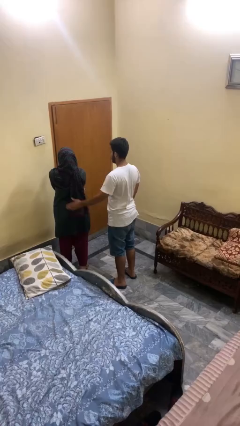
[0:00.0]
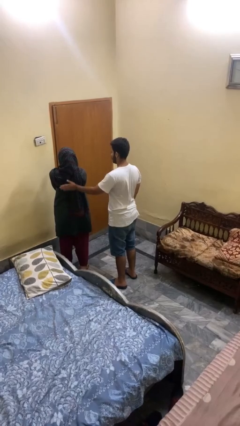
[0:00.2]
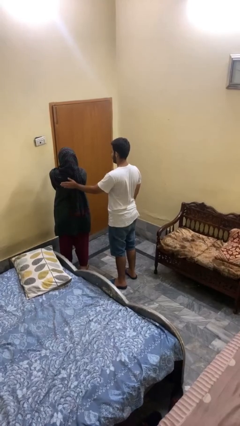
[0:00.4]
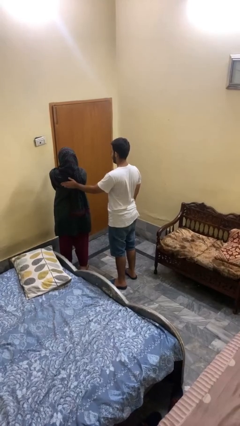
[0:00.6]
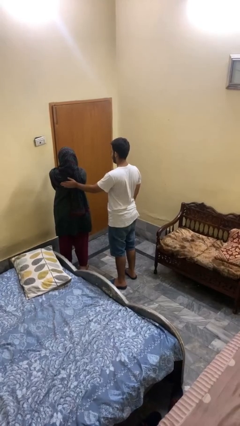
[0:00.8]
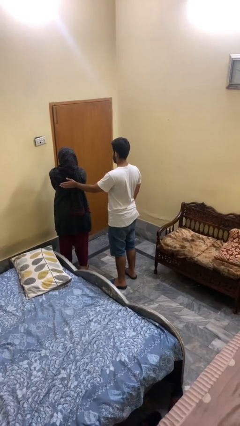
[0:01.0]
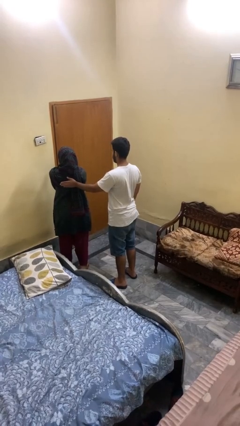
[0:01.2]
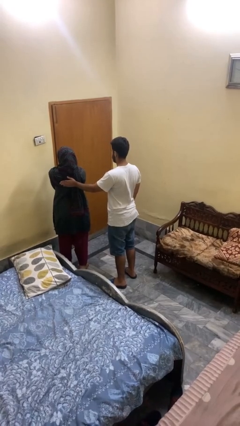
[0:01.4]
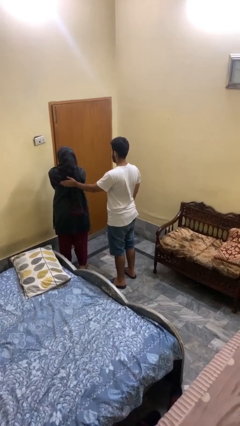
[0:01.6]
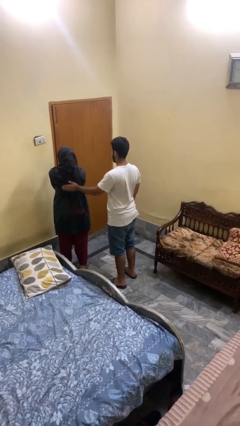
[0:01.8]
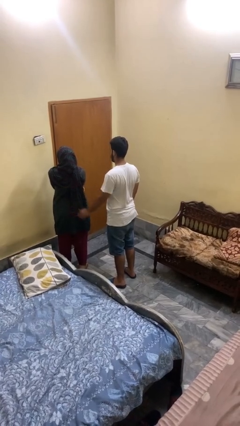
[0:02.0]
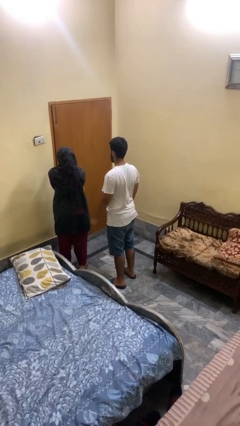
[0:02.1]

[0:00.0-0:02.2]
person touches back of person

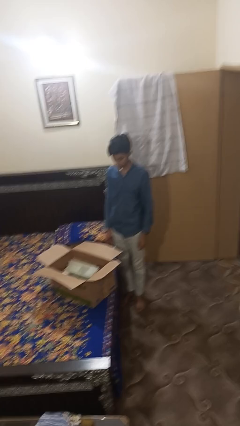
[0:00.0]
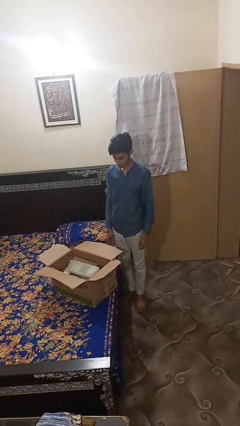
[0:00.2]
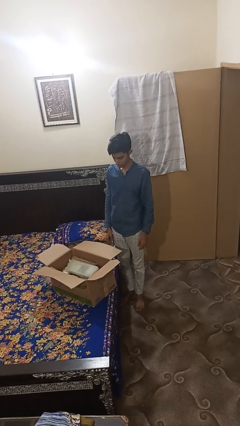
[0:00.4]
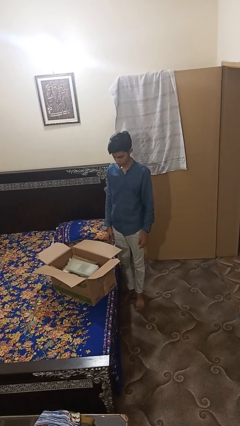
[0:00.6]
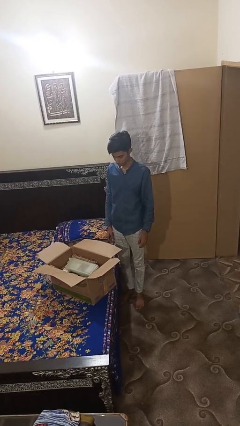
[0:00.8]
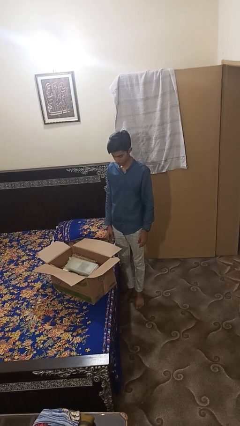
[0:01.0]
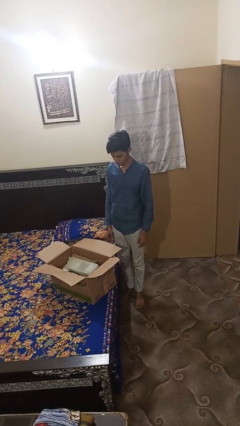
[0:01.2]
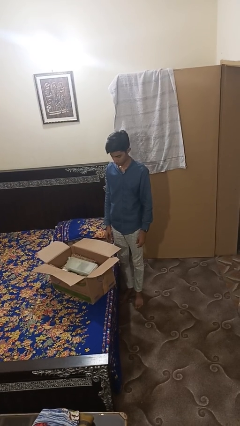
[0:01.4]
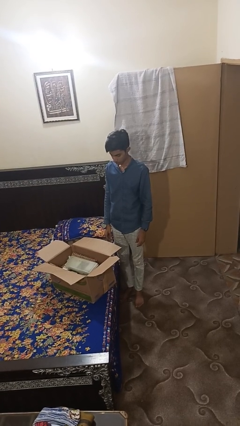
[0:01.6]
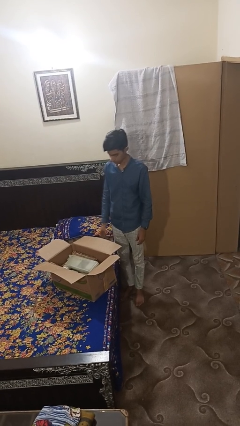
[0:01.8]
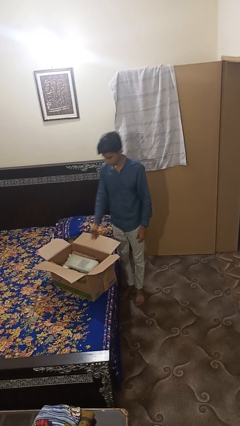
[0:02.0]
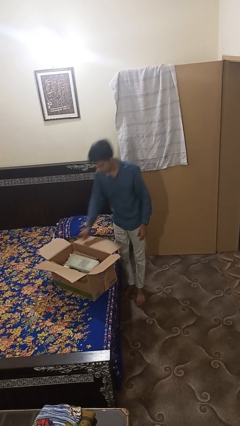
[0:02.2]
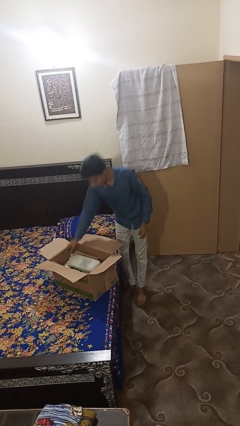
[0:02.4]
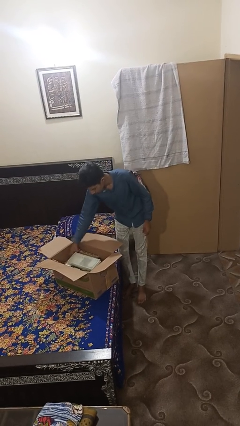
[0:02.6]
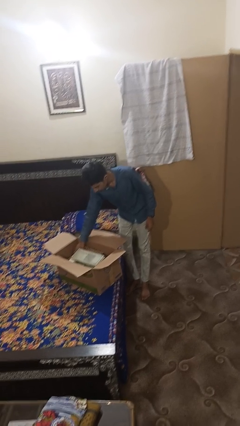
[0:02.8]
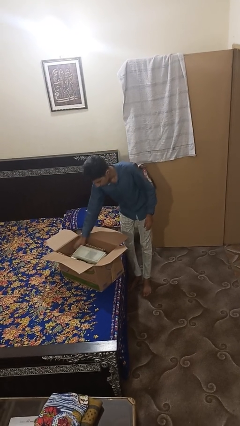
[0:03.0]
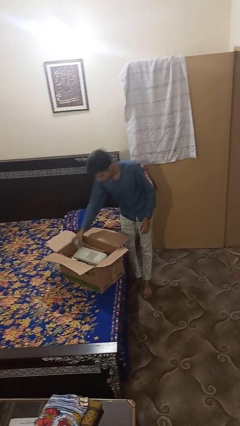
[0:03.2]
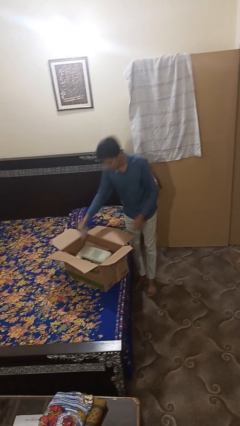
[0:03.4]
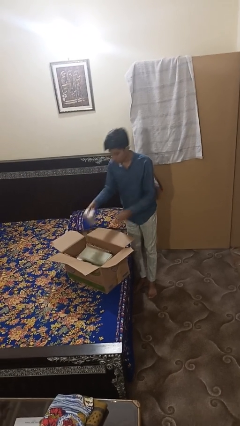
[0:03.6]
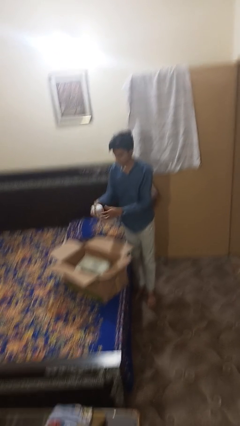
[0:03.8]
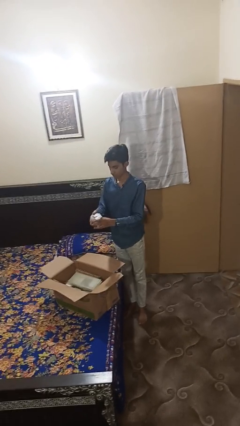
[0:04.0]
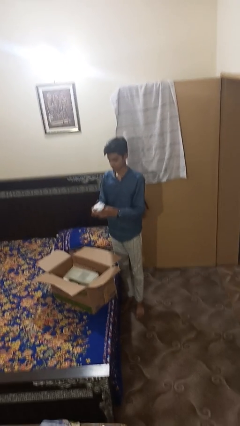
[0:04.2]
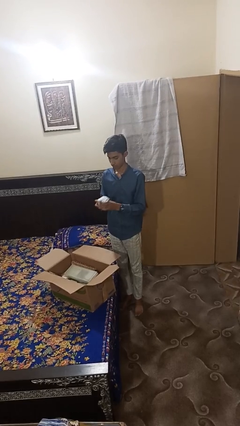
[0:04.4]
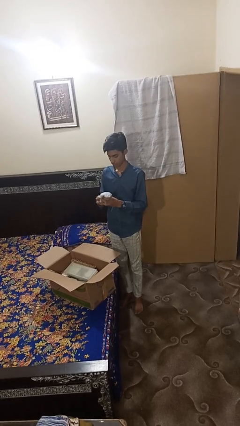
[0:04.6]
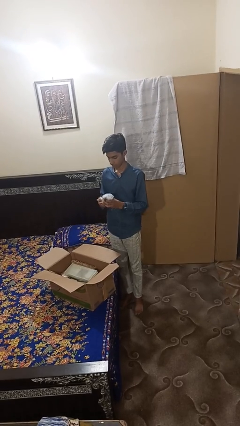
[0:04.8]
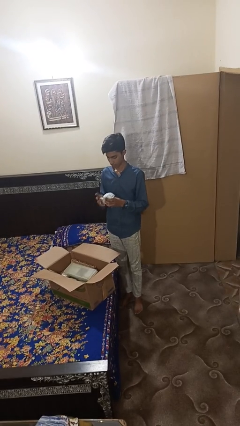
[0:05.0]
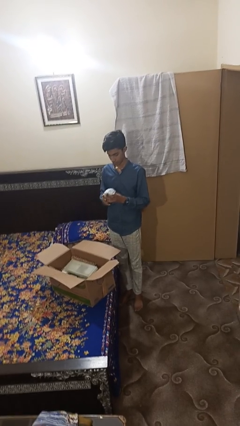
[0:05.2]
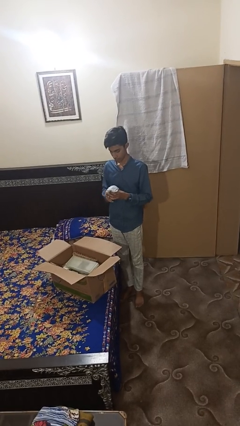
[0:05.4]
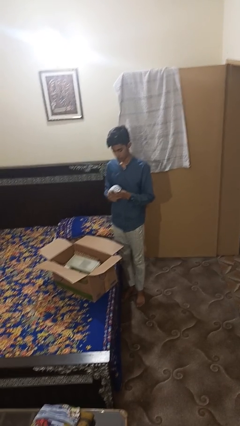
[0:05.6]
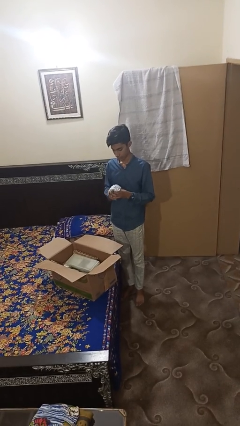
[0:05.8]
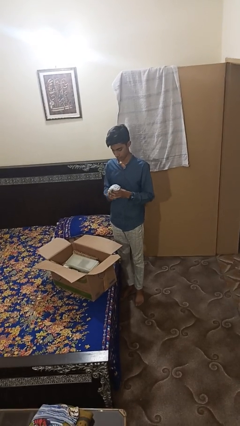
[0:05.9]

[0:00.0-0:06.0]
person takes object from box

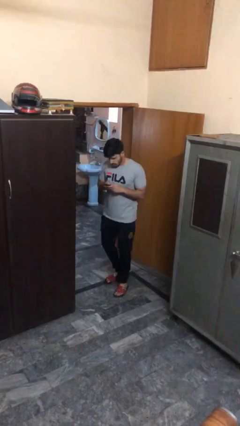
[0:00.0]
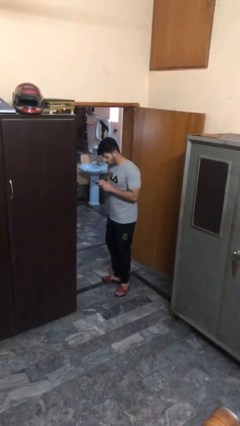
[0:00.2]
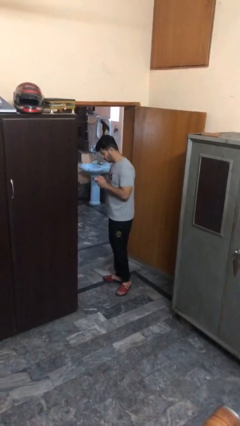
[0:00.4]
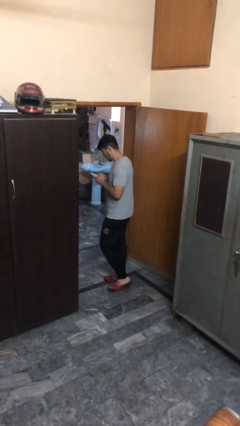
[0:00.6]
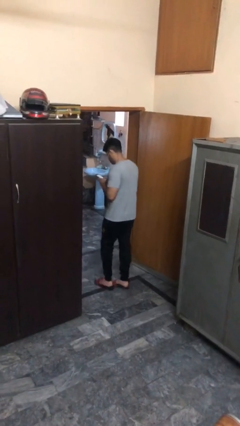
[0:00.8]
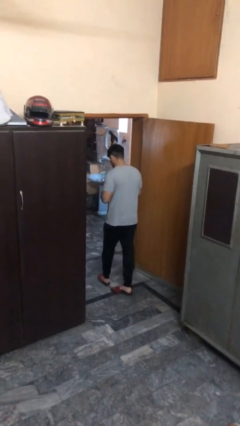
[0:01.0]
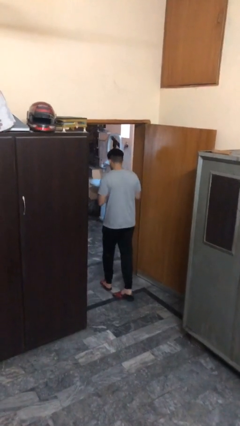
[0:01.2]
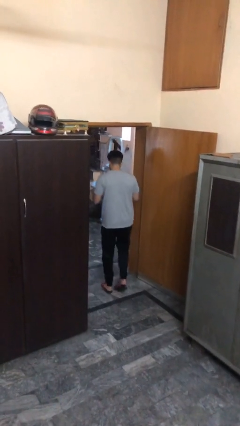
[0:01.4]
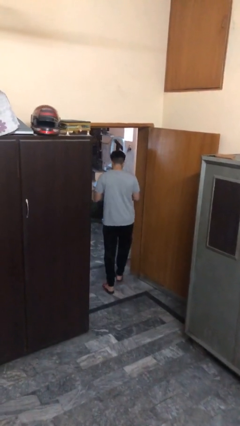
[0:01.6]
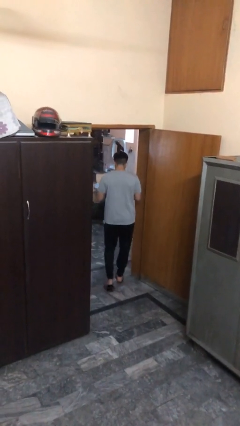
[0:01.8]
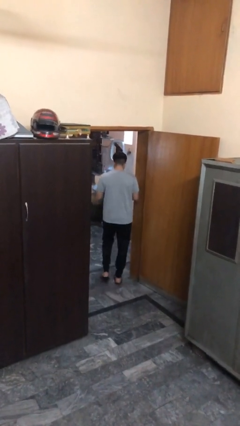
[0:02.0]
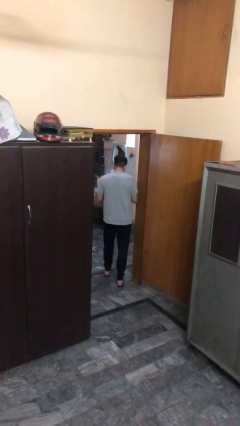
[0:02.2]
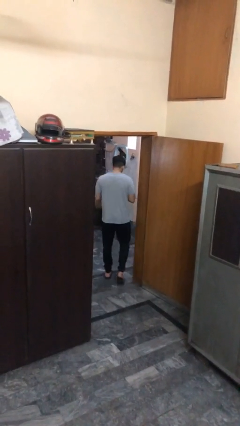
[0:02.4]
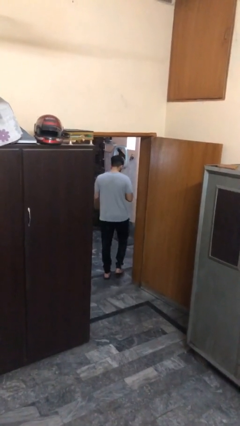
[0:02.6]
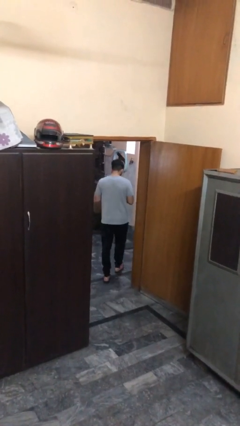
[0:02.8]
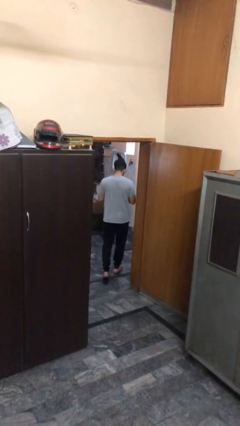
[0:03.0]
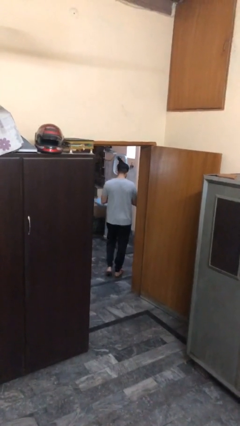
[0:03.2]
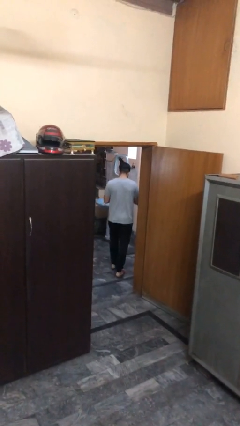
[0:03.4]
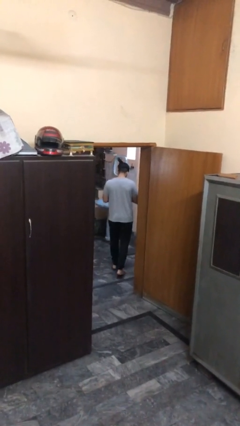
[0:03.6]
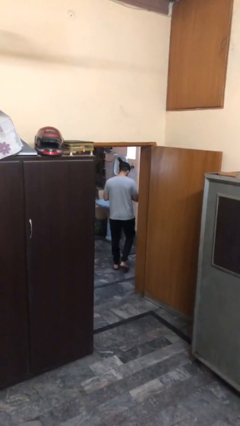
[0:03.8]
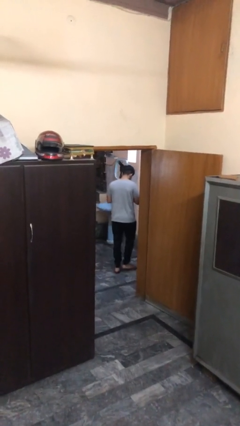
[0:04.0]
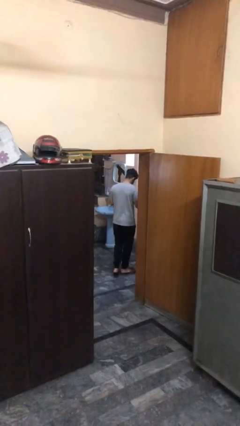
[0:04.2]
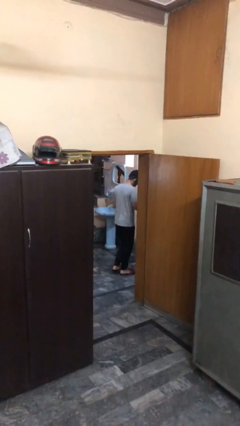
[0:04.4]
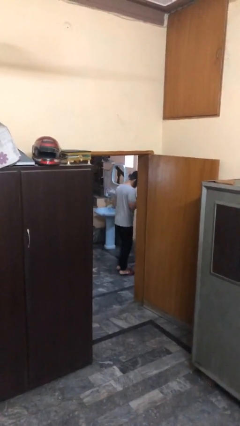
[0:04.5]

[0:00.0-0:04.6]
person exits scene through structure

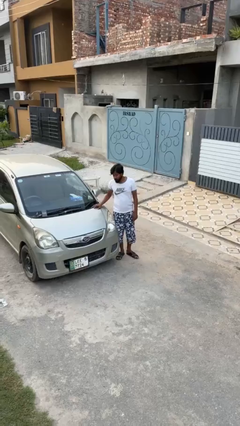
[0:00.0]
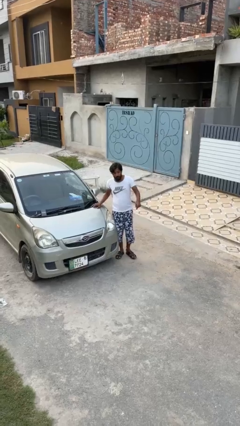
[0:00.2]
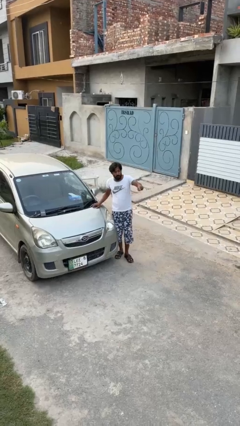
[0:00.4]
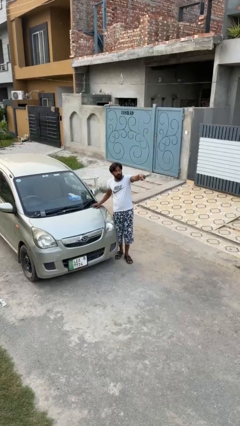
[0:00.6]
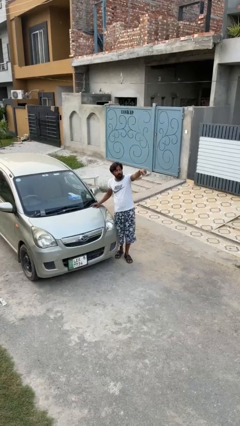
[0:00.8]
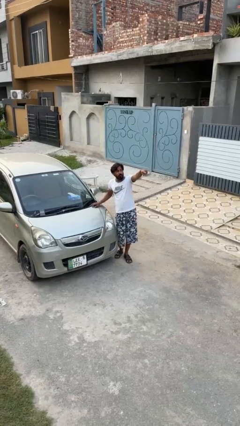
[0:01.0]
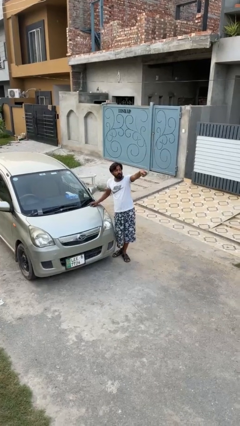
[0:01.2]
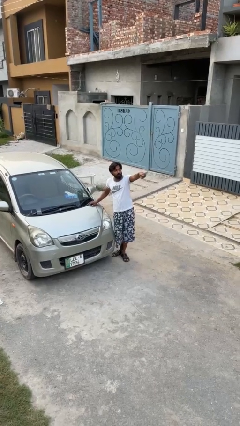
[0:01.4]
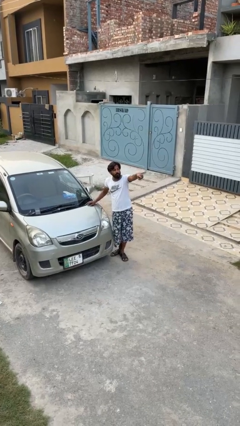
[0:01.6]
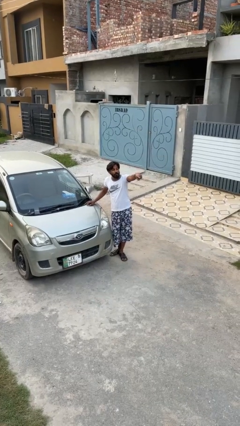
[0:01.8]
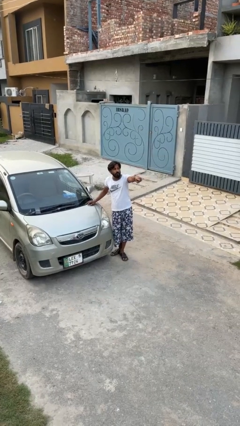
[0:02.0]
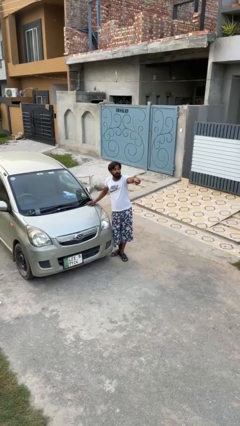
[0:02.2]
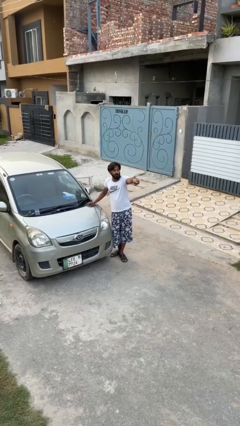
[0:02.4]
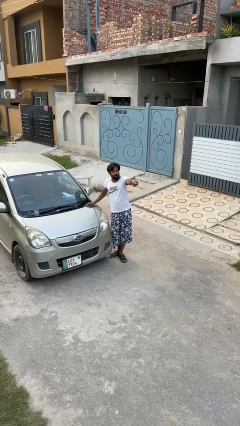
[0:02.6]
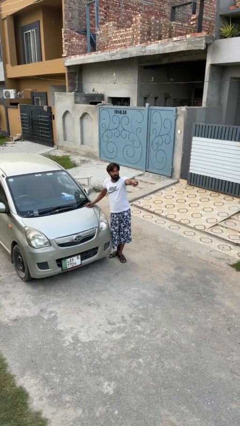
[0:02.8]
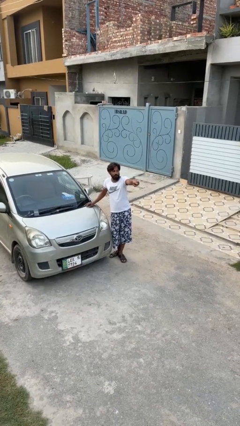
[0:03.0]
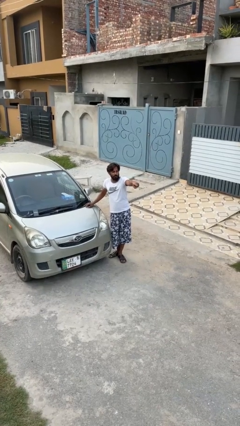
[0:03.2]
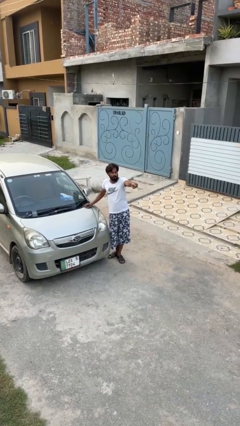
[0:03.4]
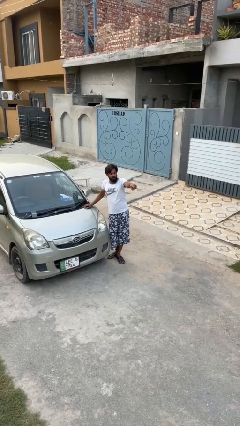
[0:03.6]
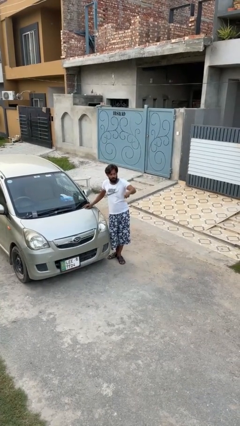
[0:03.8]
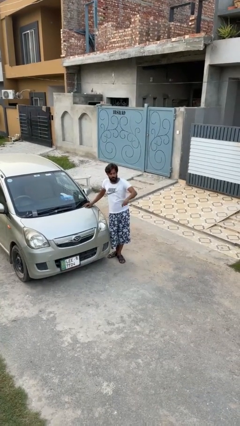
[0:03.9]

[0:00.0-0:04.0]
person points at person

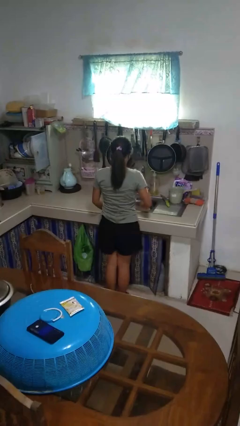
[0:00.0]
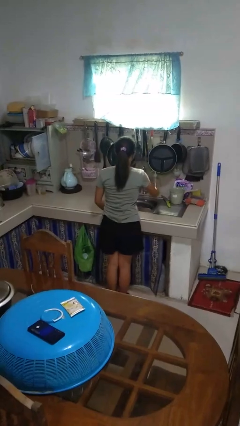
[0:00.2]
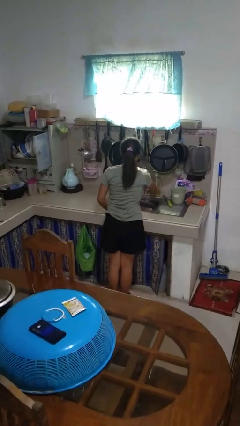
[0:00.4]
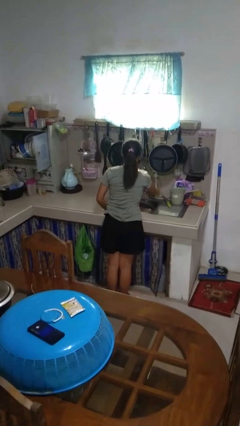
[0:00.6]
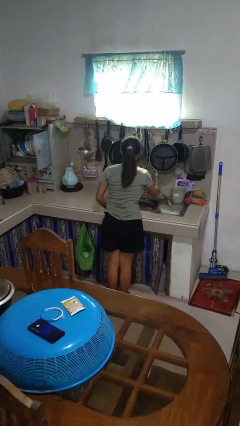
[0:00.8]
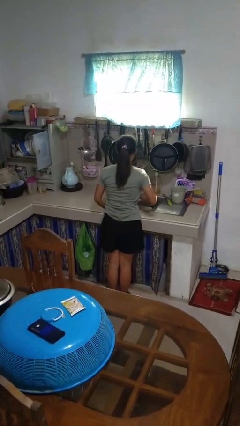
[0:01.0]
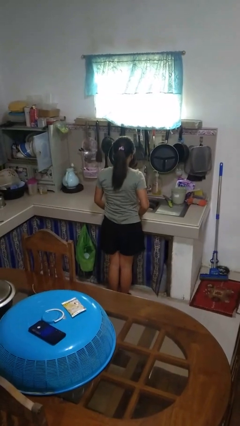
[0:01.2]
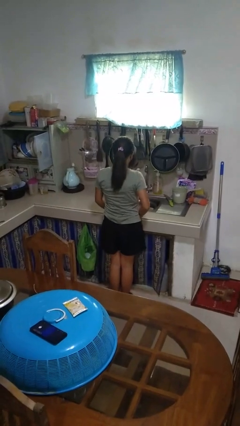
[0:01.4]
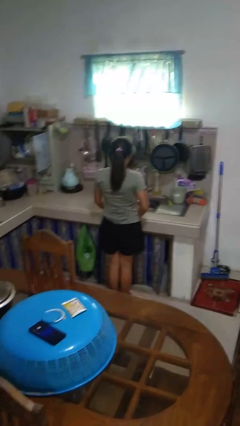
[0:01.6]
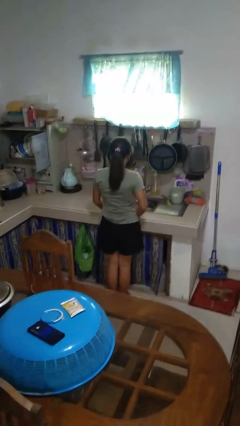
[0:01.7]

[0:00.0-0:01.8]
person turns off faucet
